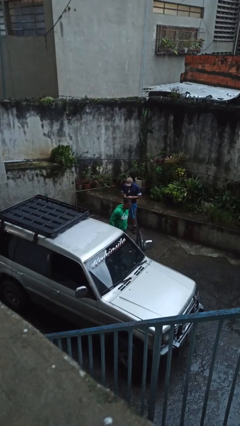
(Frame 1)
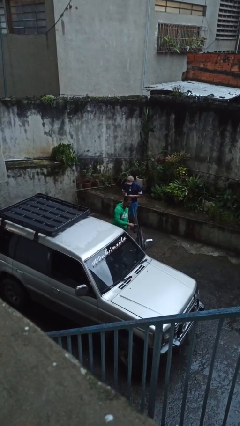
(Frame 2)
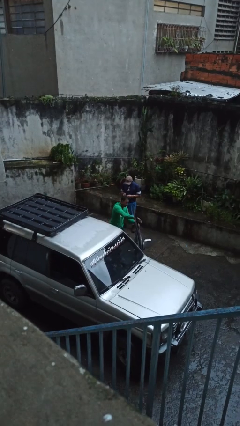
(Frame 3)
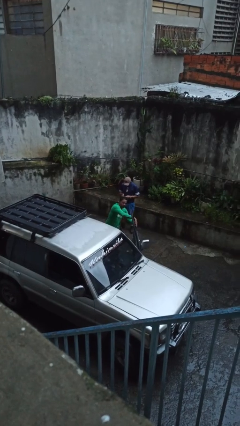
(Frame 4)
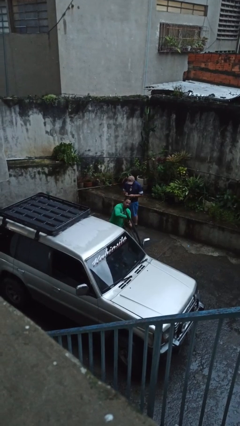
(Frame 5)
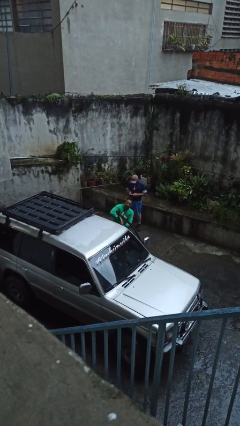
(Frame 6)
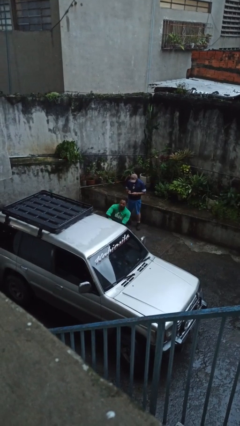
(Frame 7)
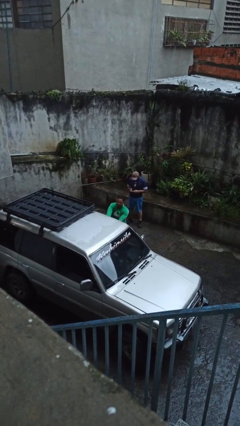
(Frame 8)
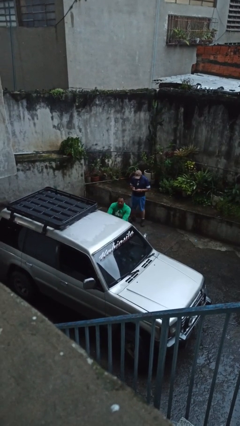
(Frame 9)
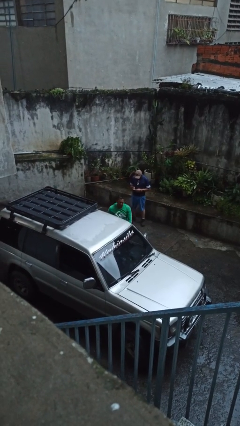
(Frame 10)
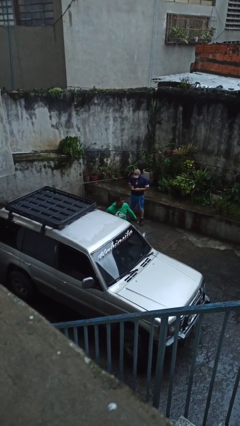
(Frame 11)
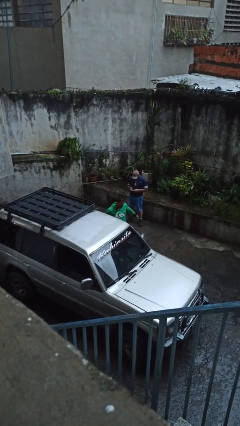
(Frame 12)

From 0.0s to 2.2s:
person closes car door

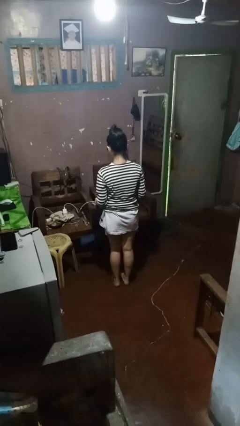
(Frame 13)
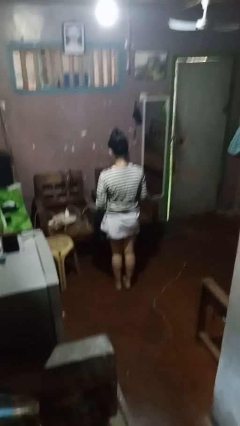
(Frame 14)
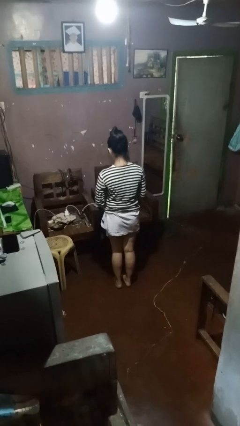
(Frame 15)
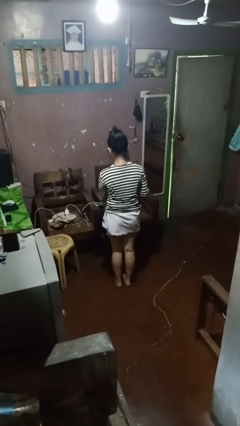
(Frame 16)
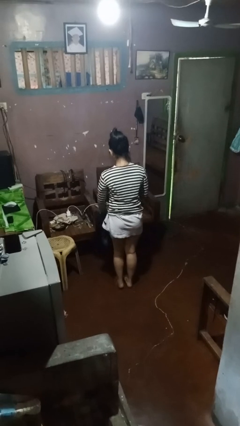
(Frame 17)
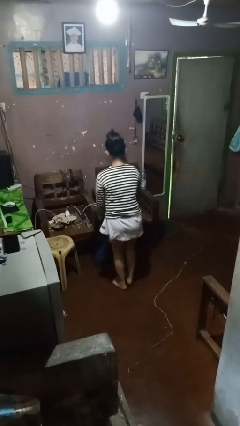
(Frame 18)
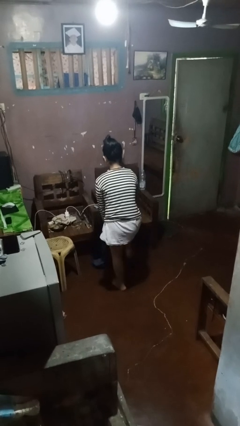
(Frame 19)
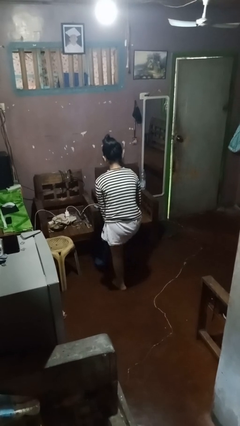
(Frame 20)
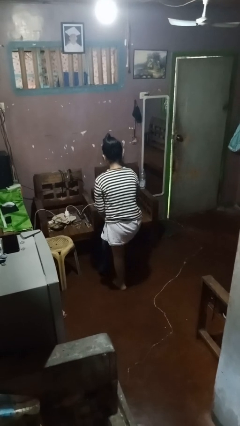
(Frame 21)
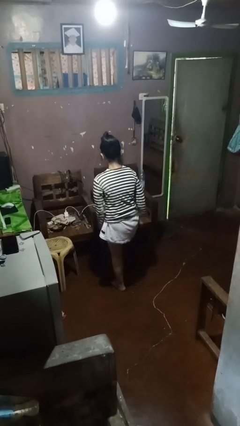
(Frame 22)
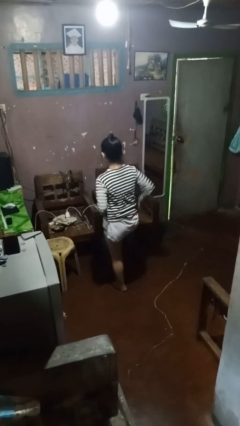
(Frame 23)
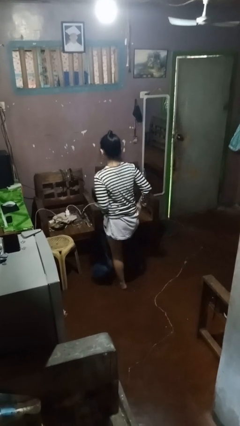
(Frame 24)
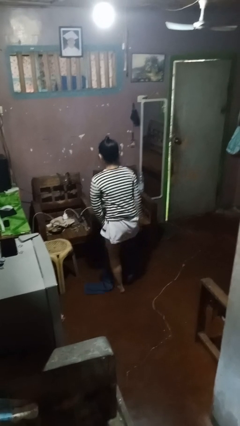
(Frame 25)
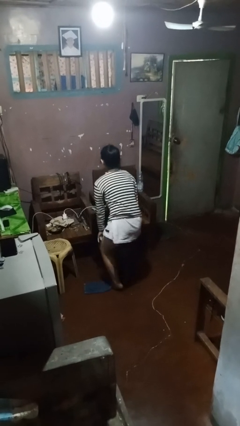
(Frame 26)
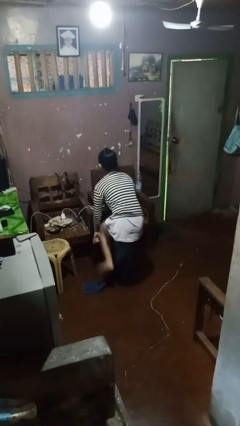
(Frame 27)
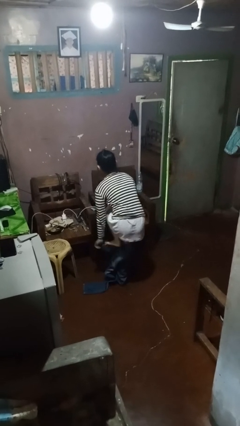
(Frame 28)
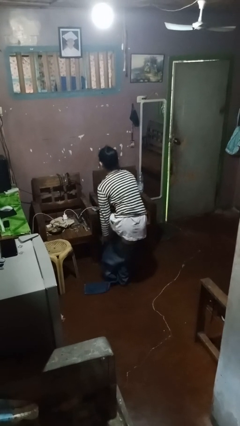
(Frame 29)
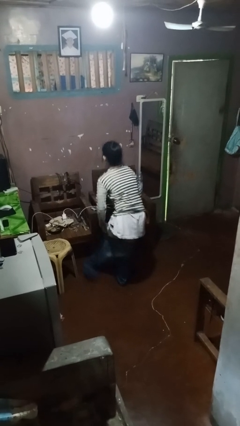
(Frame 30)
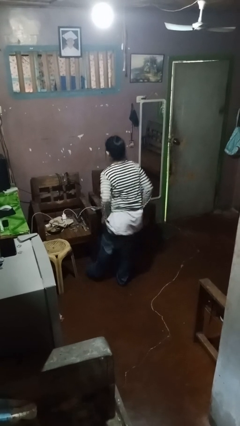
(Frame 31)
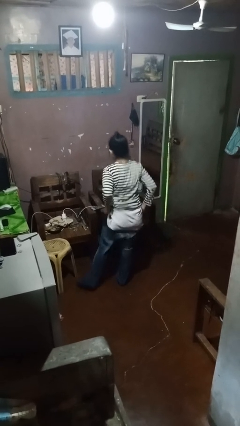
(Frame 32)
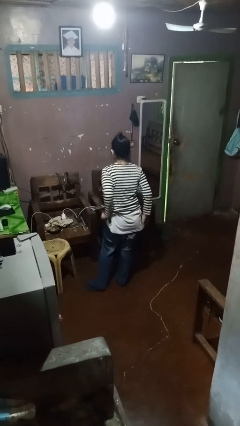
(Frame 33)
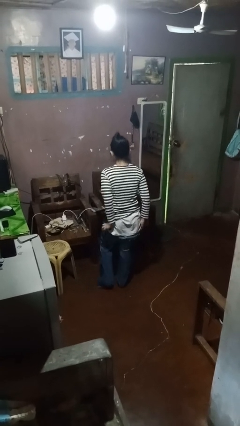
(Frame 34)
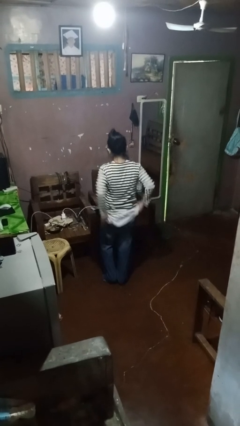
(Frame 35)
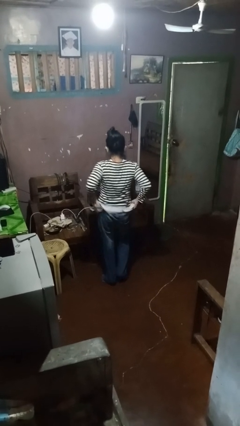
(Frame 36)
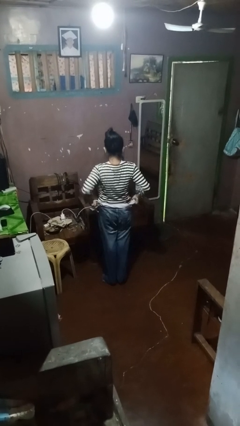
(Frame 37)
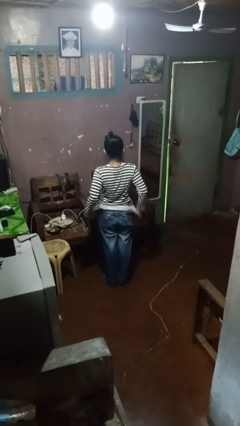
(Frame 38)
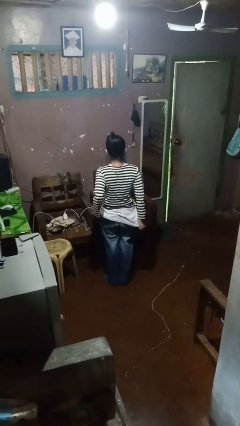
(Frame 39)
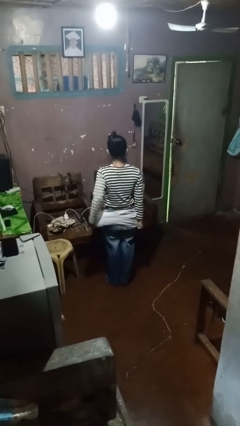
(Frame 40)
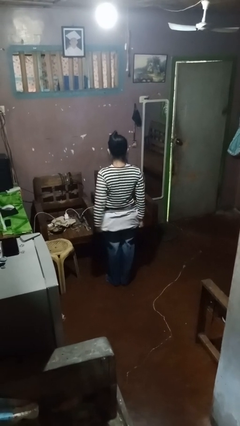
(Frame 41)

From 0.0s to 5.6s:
person puts on pants

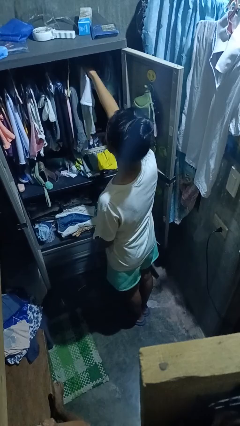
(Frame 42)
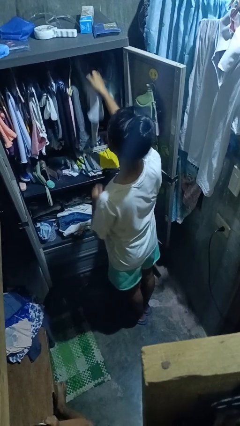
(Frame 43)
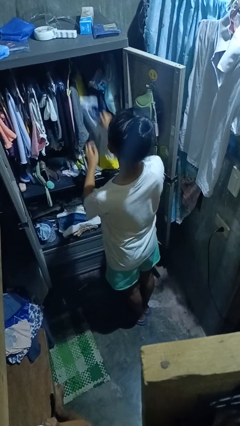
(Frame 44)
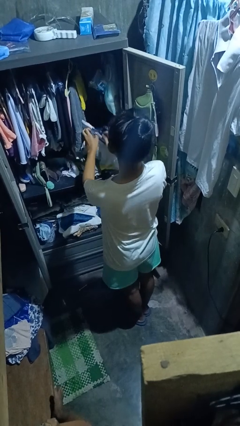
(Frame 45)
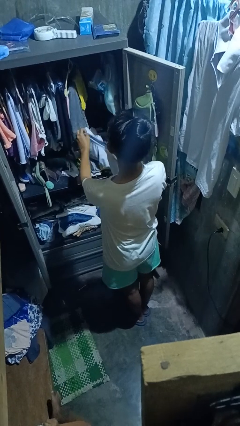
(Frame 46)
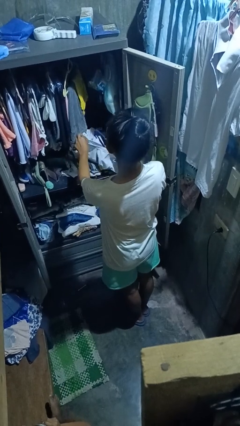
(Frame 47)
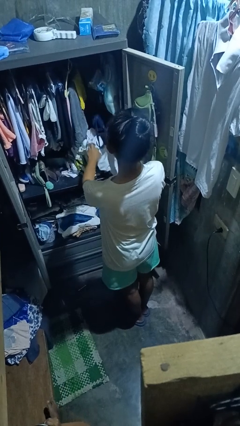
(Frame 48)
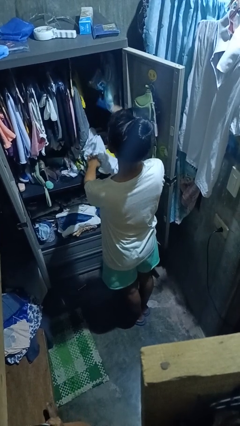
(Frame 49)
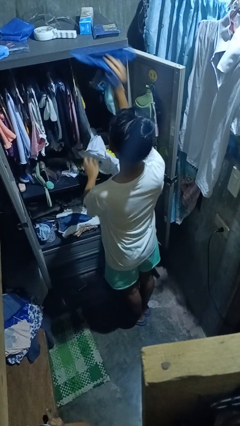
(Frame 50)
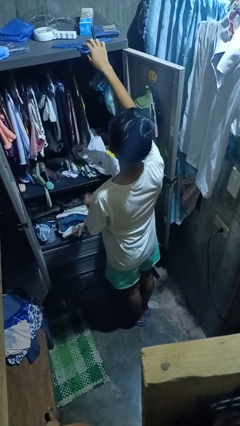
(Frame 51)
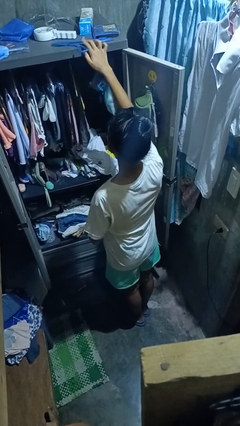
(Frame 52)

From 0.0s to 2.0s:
person takes clothes from closet

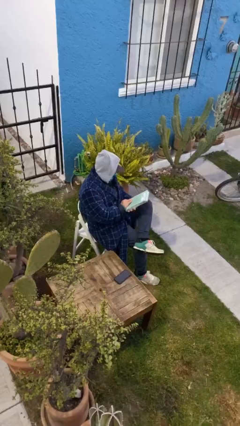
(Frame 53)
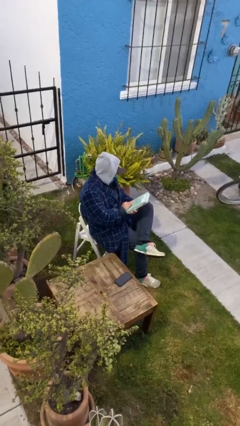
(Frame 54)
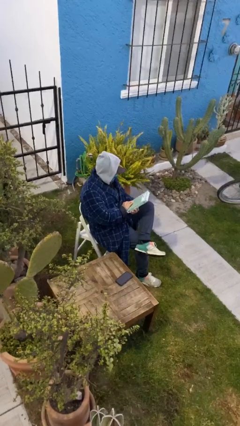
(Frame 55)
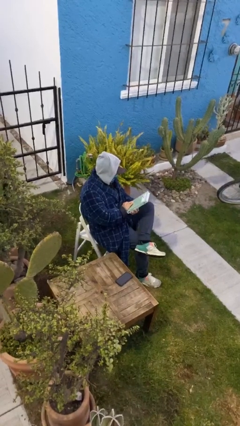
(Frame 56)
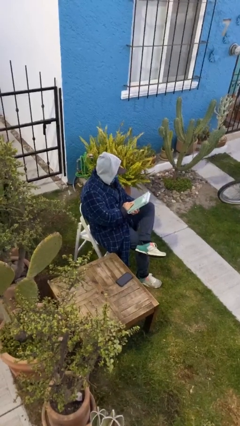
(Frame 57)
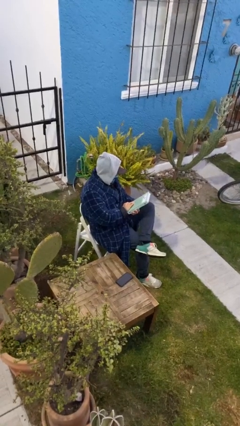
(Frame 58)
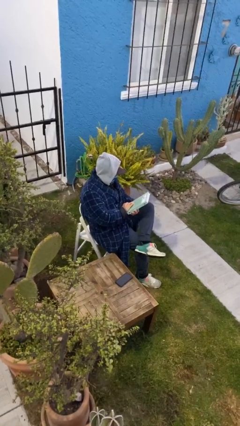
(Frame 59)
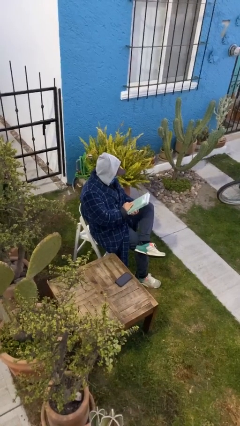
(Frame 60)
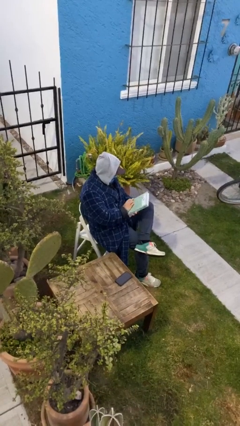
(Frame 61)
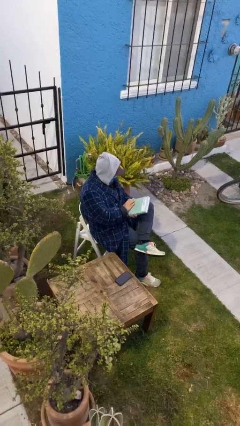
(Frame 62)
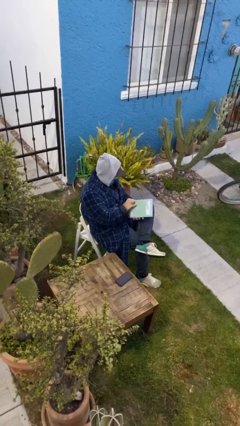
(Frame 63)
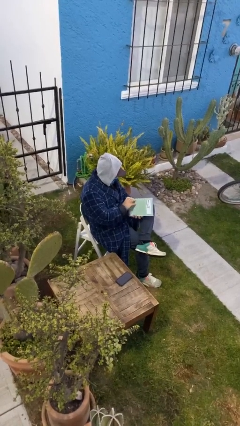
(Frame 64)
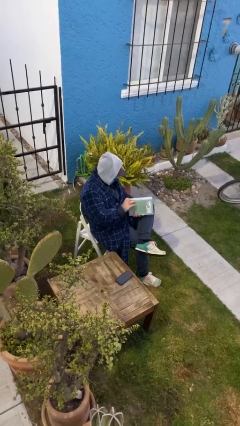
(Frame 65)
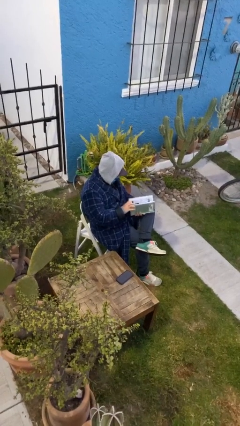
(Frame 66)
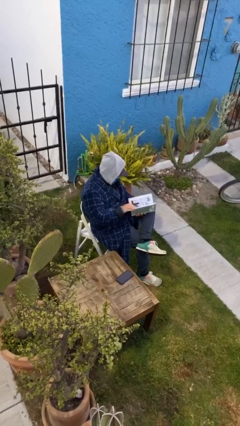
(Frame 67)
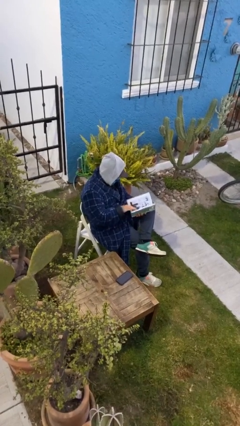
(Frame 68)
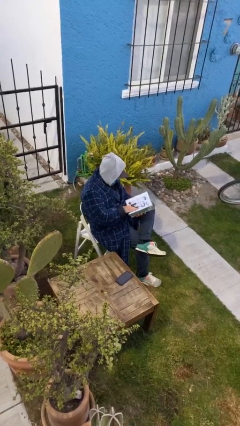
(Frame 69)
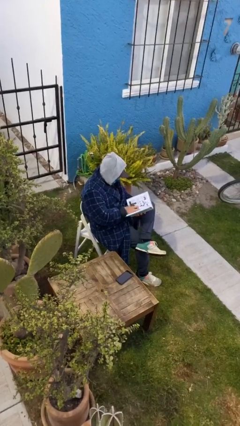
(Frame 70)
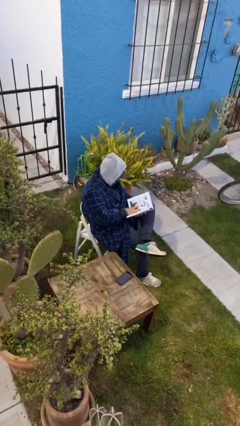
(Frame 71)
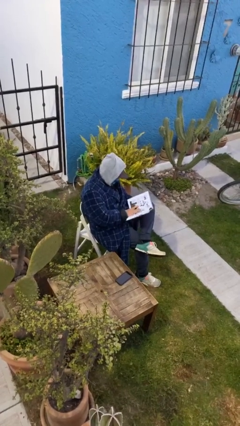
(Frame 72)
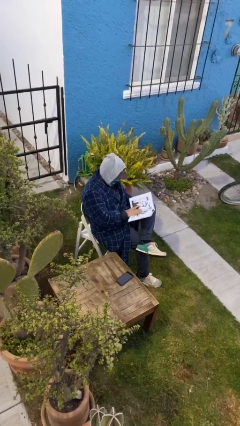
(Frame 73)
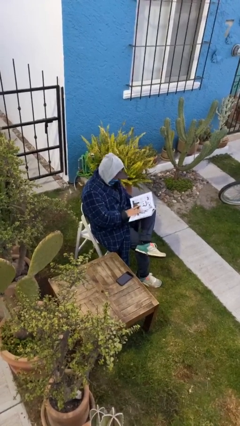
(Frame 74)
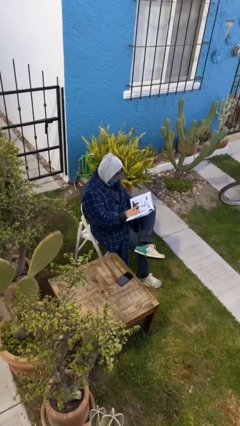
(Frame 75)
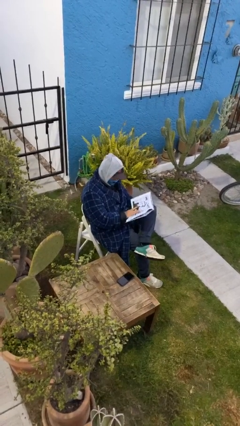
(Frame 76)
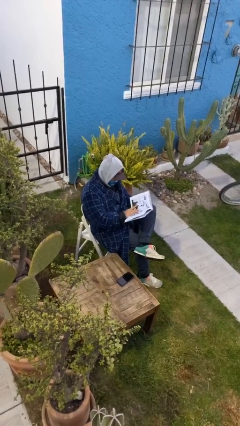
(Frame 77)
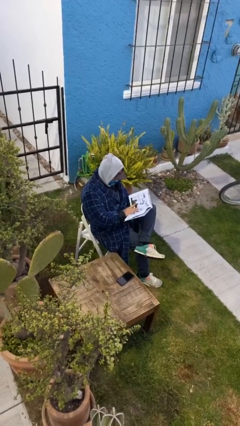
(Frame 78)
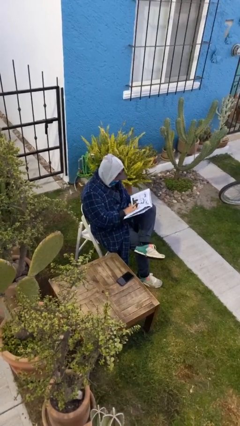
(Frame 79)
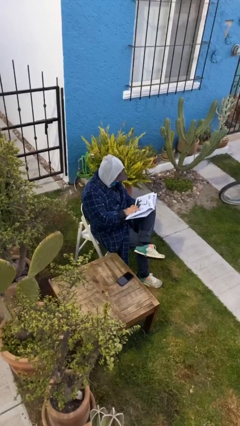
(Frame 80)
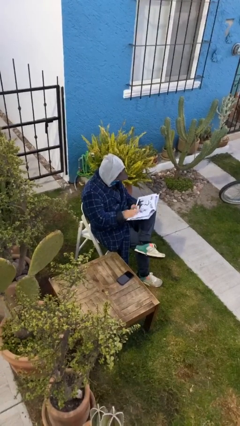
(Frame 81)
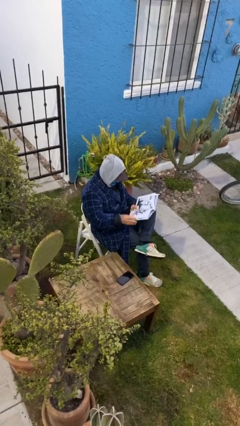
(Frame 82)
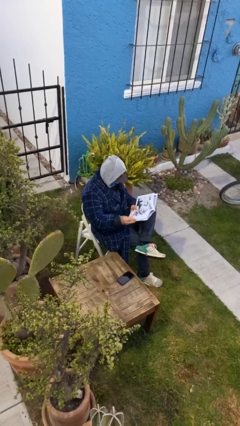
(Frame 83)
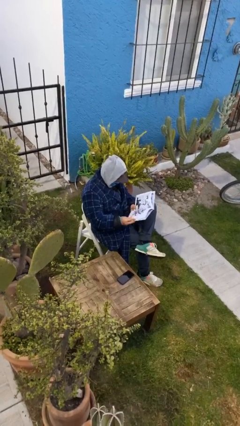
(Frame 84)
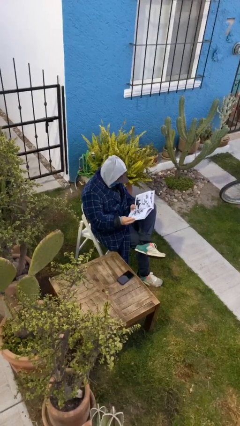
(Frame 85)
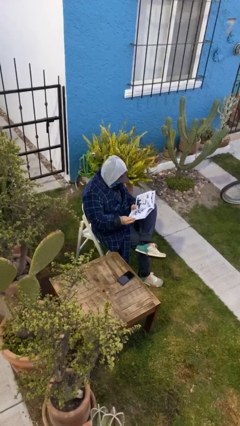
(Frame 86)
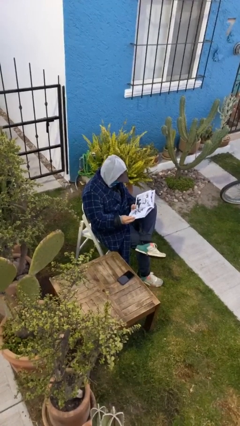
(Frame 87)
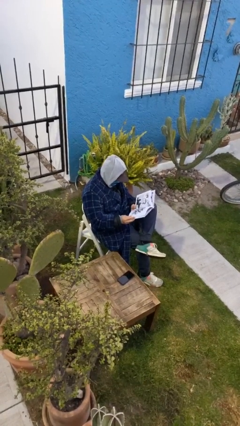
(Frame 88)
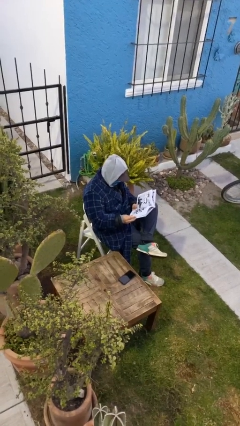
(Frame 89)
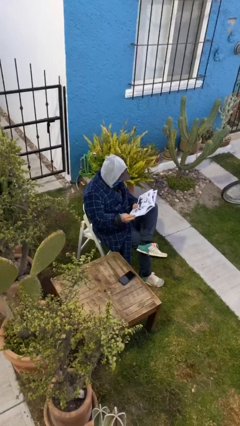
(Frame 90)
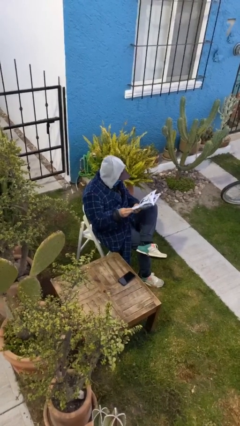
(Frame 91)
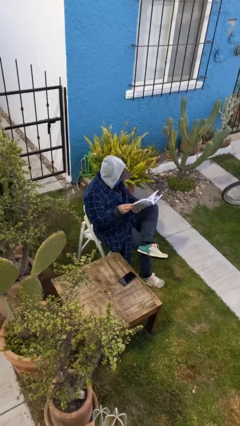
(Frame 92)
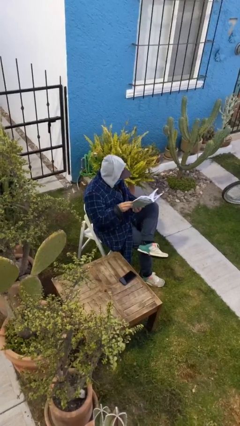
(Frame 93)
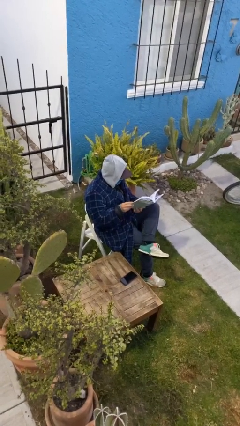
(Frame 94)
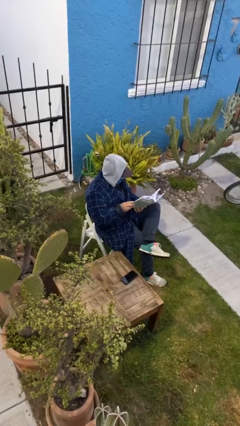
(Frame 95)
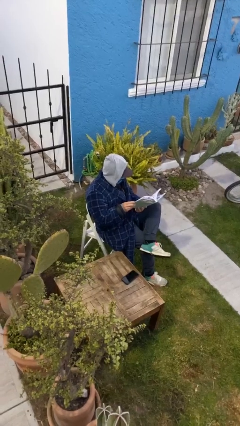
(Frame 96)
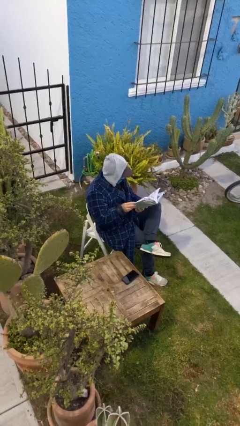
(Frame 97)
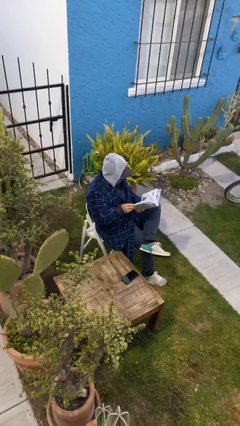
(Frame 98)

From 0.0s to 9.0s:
person reads document
